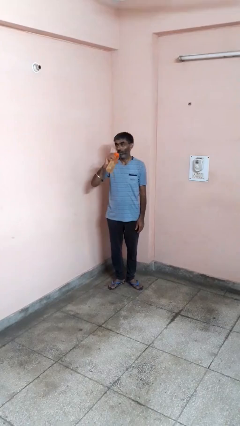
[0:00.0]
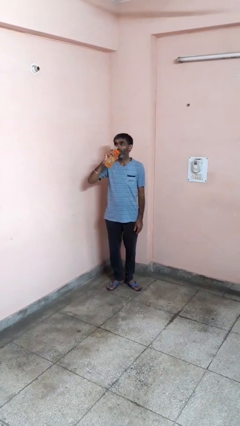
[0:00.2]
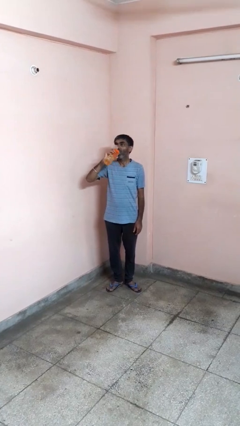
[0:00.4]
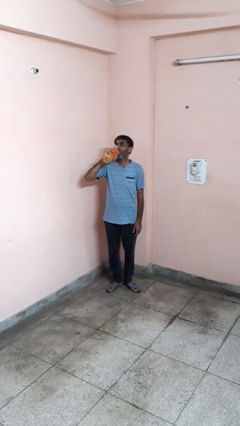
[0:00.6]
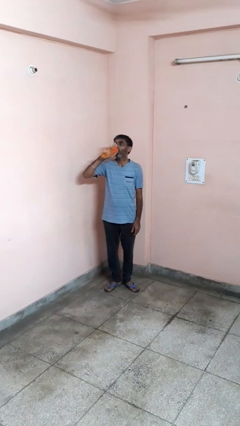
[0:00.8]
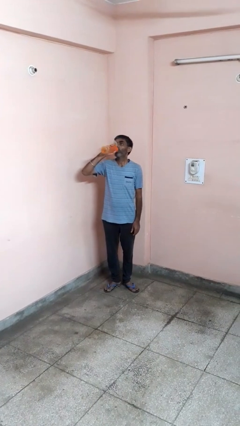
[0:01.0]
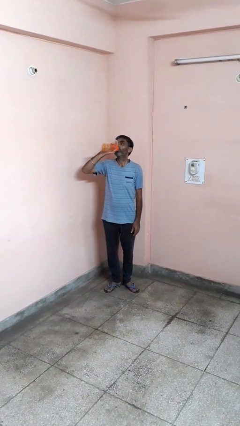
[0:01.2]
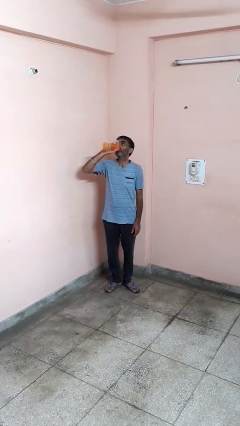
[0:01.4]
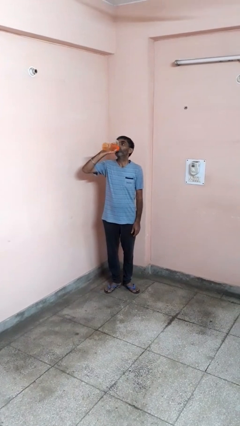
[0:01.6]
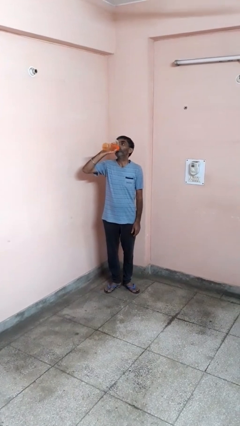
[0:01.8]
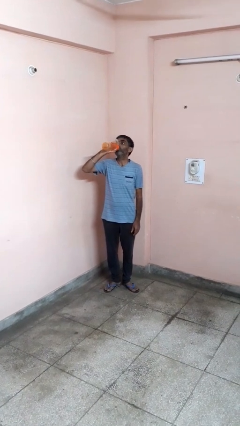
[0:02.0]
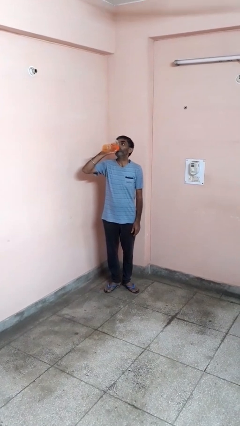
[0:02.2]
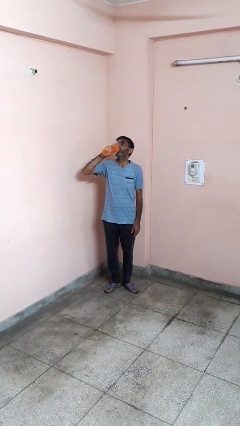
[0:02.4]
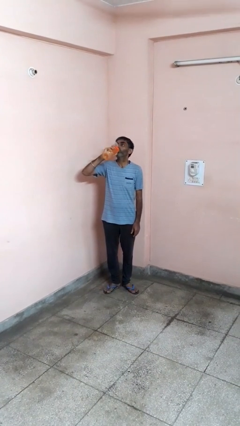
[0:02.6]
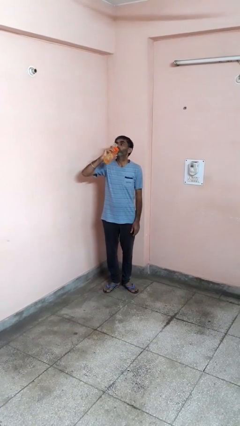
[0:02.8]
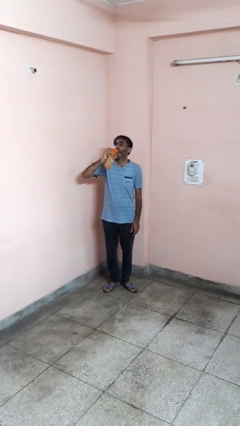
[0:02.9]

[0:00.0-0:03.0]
person drinks from bottle

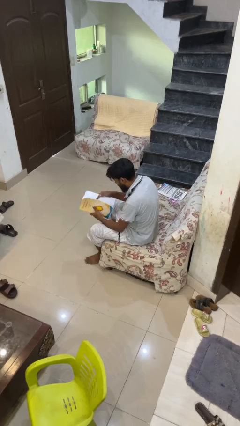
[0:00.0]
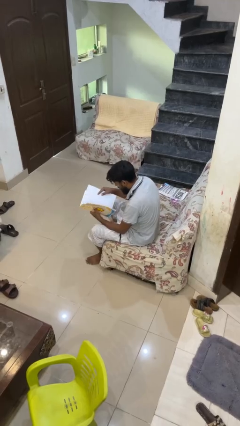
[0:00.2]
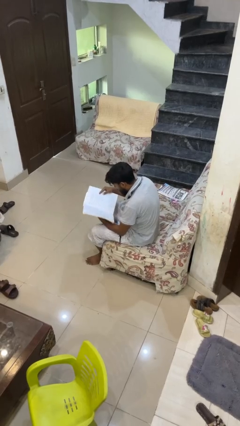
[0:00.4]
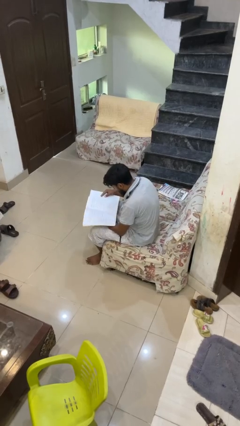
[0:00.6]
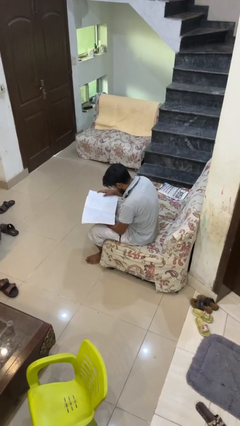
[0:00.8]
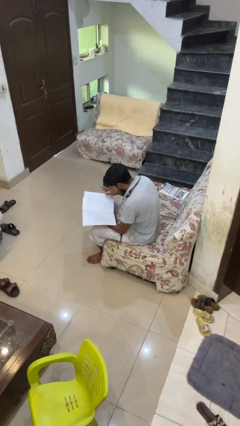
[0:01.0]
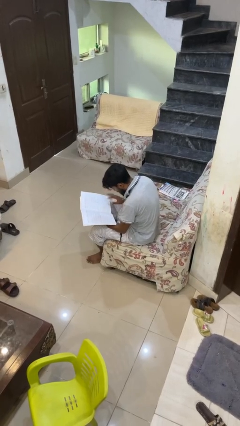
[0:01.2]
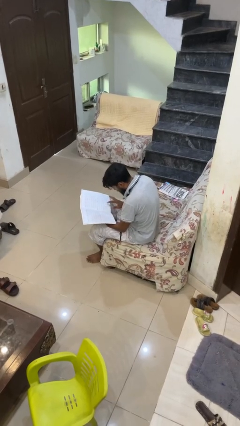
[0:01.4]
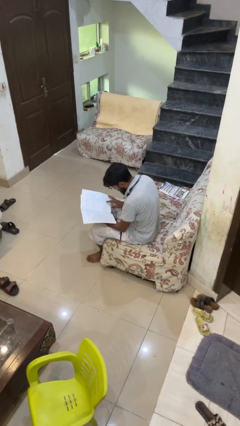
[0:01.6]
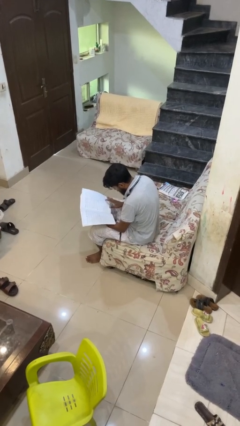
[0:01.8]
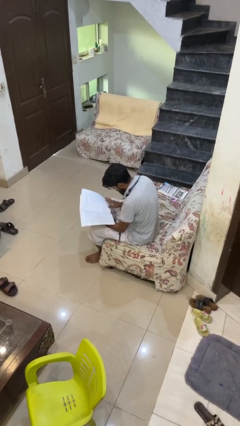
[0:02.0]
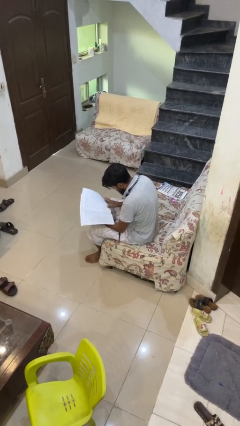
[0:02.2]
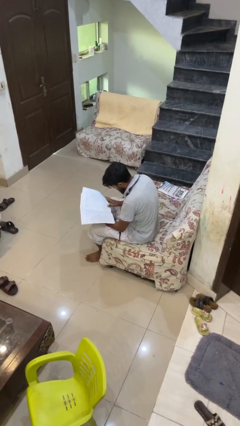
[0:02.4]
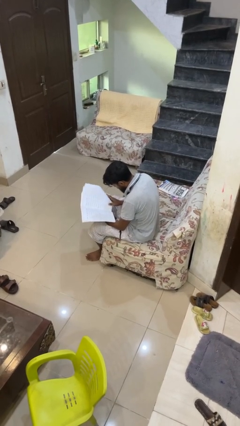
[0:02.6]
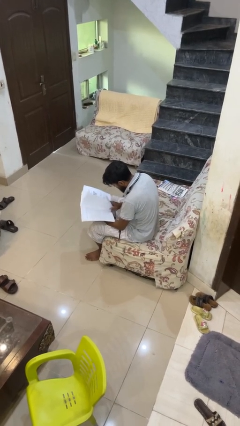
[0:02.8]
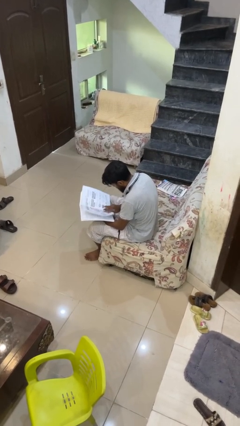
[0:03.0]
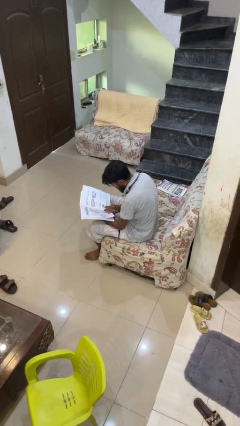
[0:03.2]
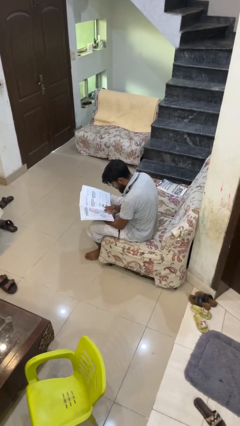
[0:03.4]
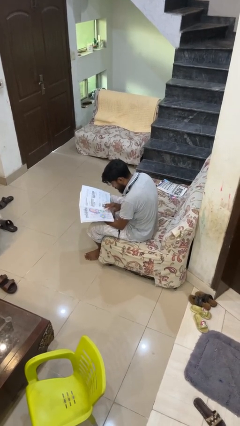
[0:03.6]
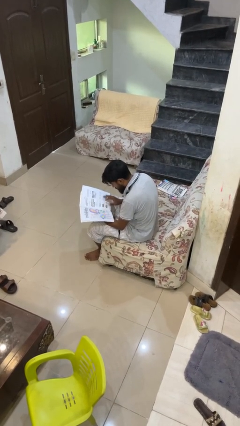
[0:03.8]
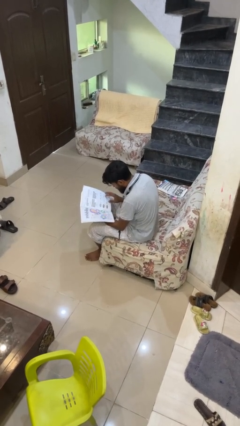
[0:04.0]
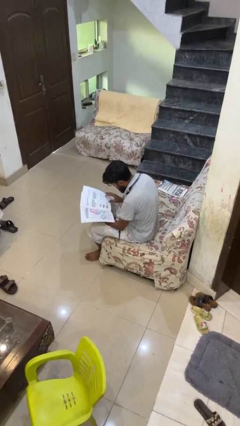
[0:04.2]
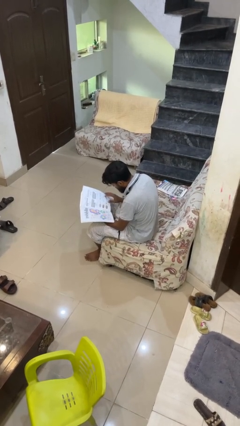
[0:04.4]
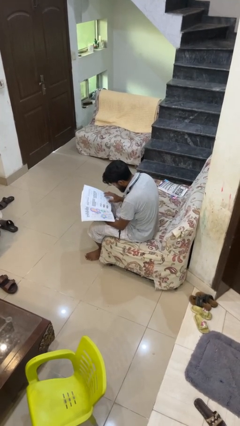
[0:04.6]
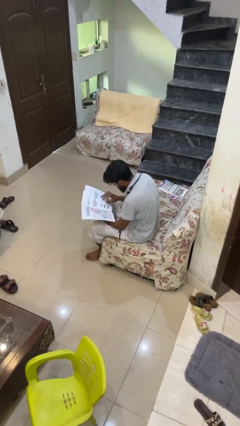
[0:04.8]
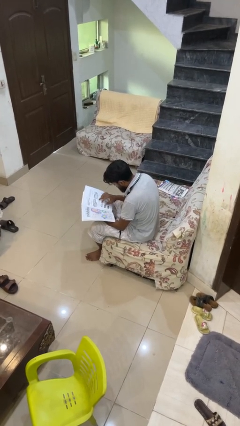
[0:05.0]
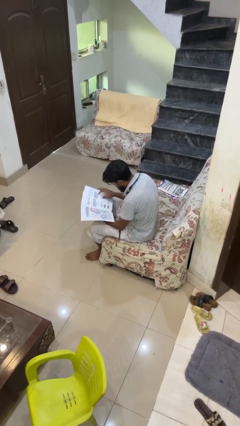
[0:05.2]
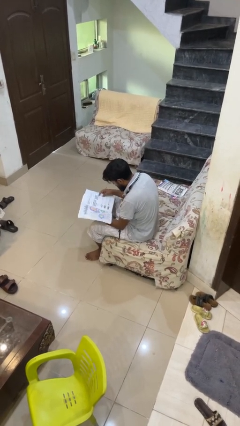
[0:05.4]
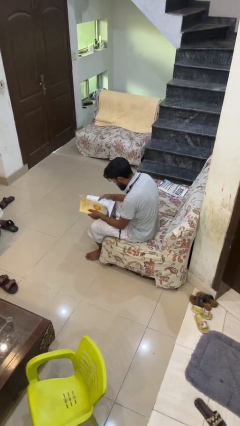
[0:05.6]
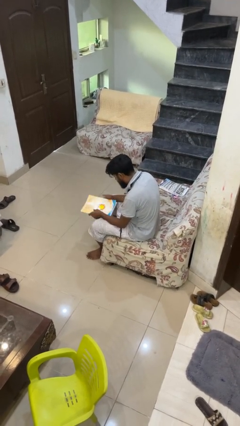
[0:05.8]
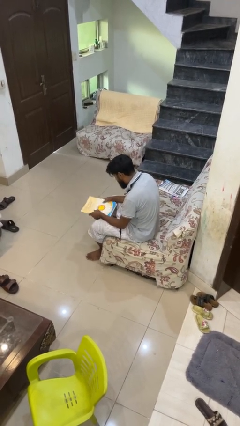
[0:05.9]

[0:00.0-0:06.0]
person reads book

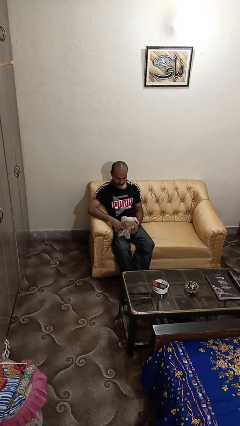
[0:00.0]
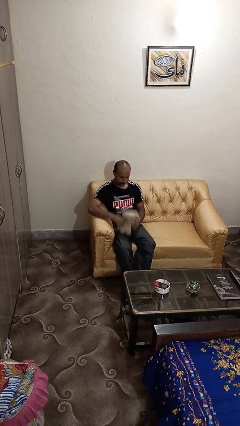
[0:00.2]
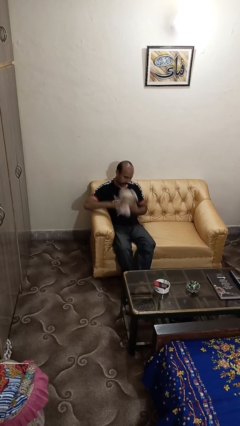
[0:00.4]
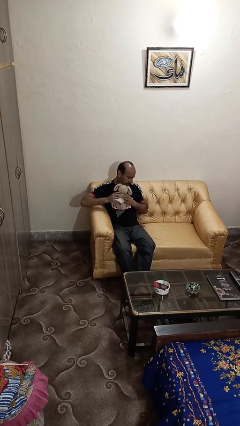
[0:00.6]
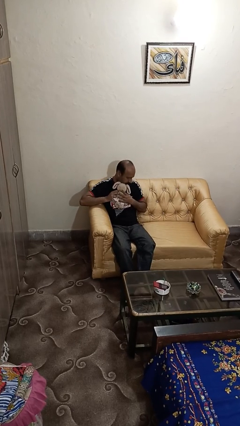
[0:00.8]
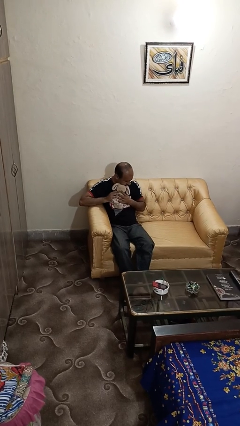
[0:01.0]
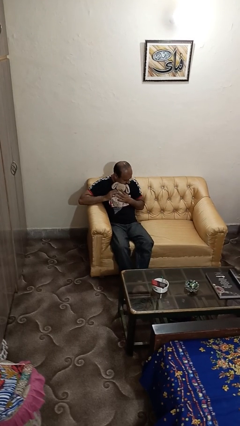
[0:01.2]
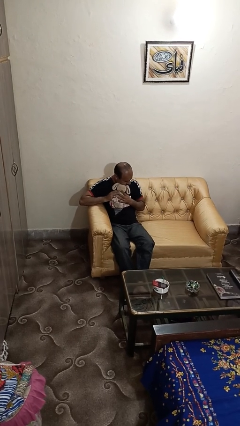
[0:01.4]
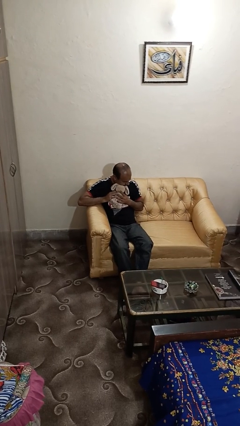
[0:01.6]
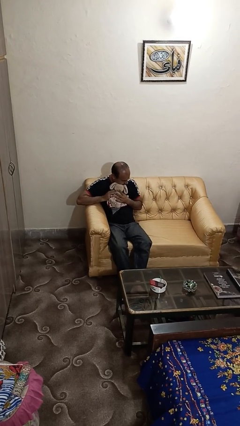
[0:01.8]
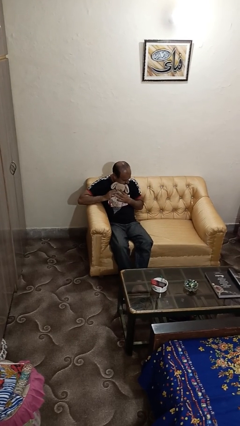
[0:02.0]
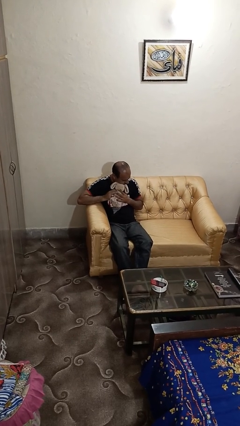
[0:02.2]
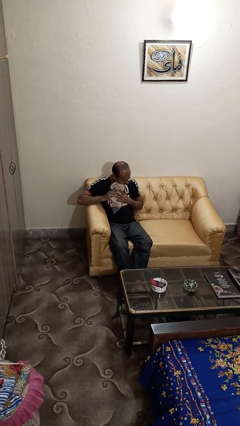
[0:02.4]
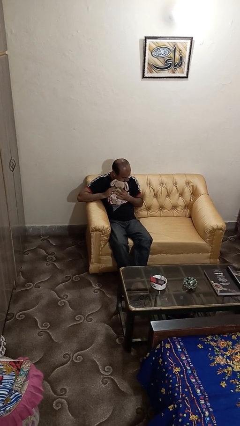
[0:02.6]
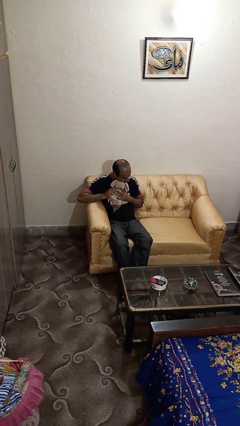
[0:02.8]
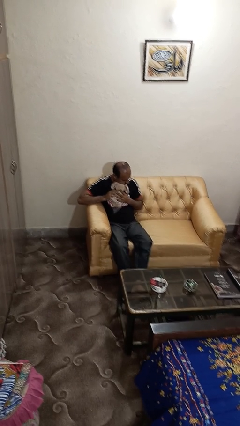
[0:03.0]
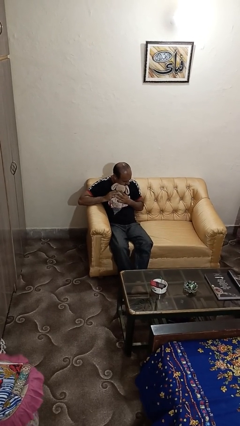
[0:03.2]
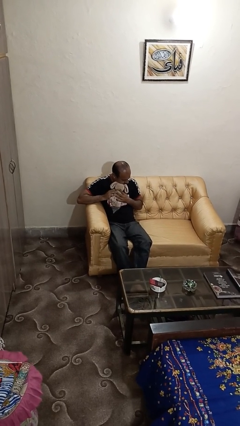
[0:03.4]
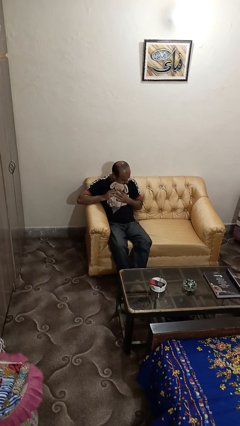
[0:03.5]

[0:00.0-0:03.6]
person hugs stuffed animal

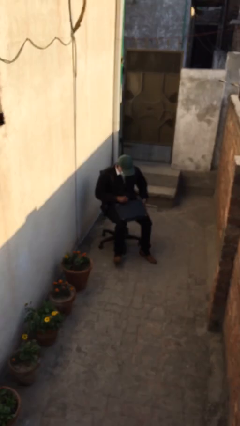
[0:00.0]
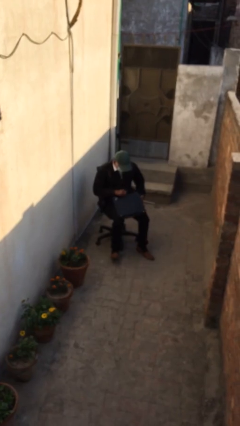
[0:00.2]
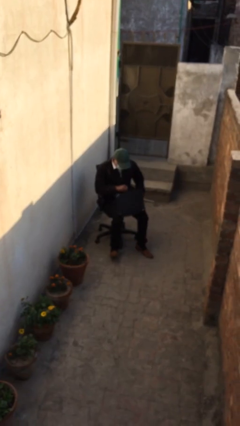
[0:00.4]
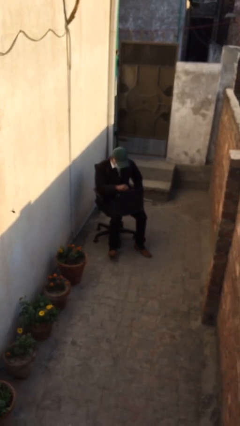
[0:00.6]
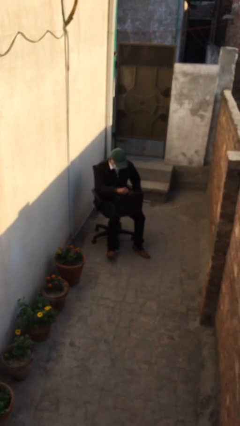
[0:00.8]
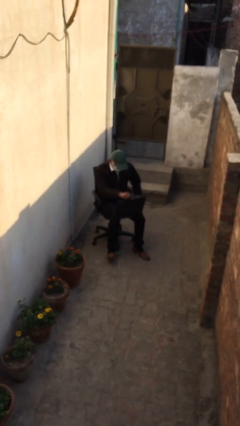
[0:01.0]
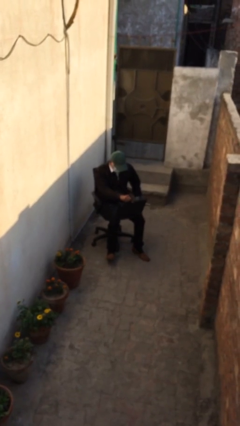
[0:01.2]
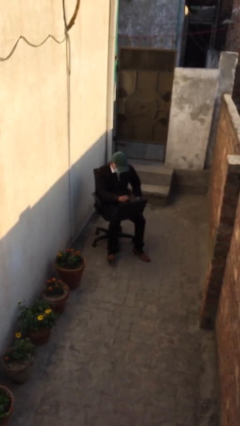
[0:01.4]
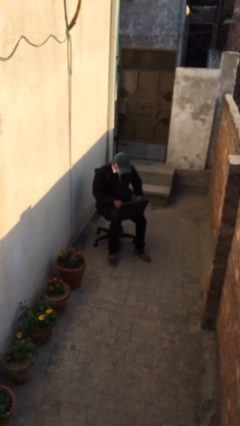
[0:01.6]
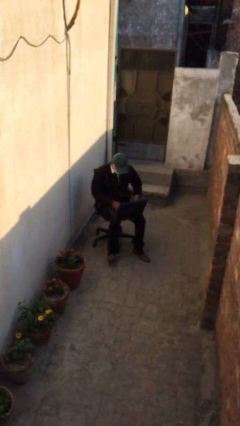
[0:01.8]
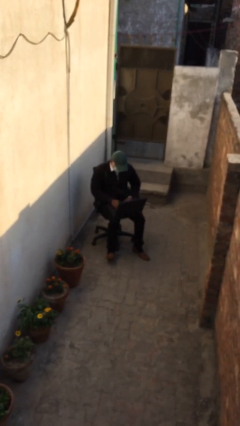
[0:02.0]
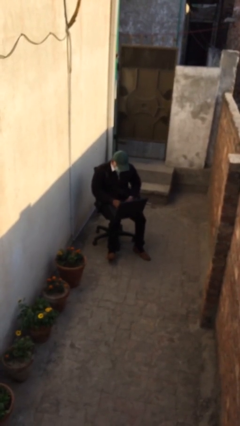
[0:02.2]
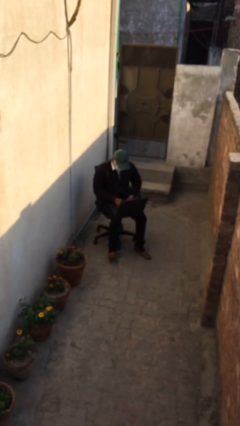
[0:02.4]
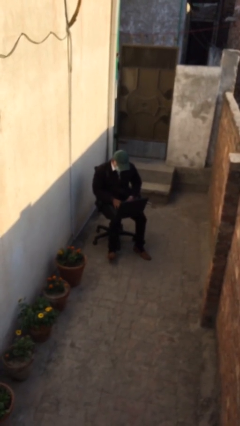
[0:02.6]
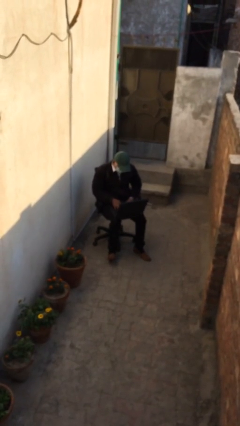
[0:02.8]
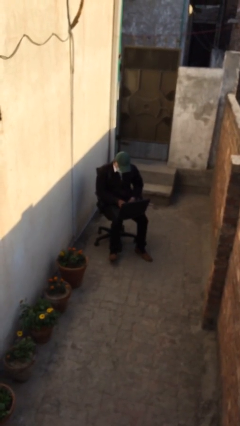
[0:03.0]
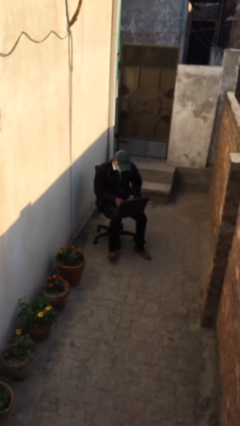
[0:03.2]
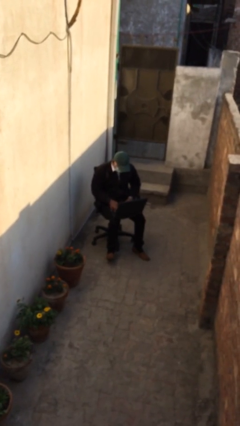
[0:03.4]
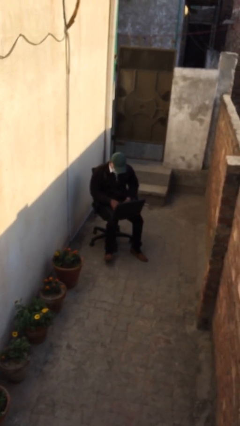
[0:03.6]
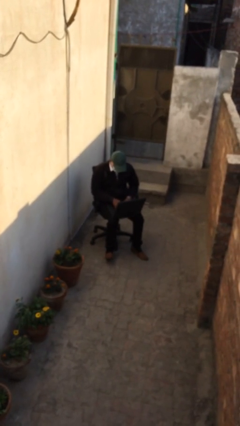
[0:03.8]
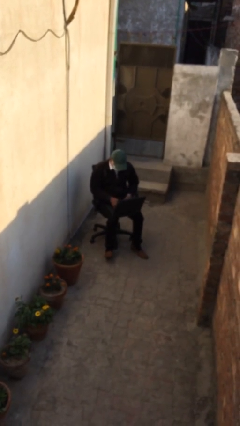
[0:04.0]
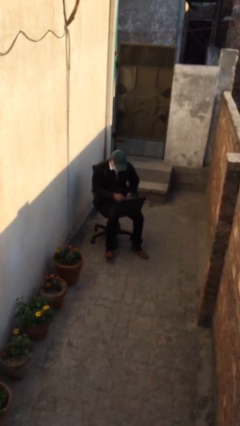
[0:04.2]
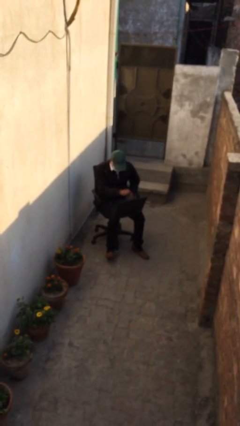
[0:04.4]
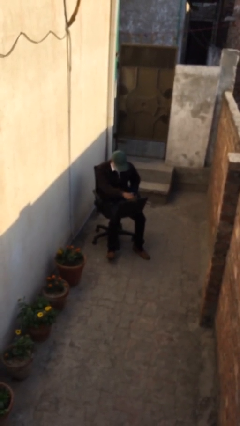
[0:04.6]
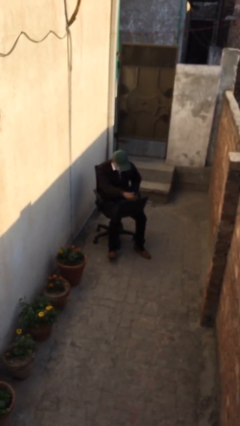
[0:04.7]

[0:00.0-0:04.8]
person interacts with laptop

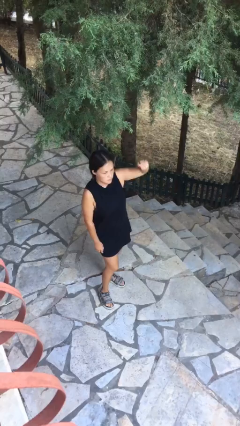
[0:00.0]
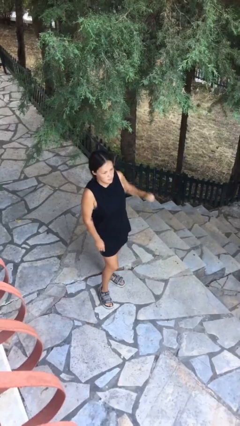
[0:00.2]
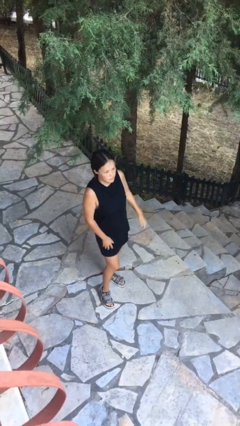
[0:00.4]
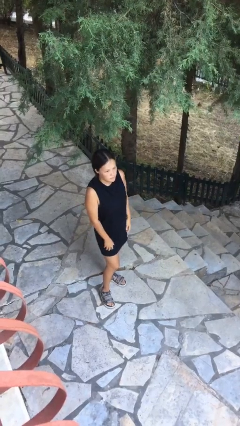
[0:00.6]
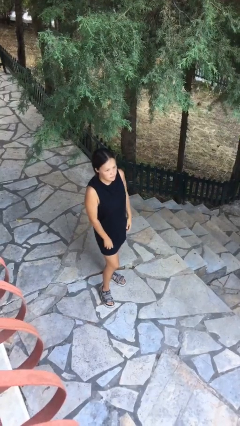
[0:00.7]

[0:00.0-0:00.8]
person gestures lower hand
